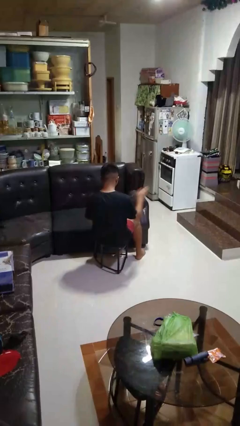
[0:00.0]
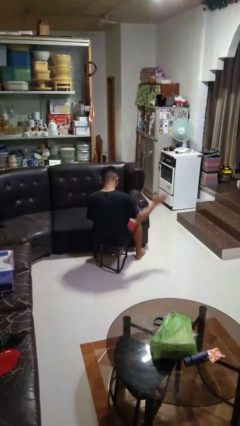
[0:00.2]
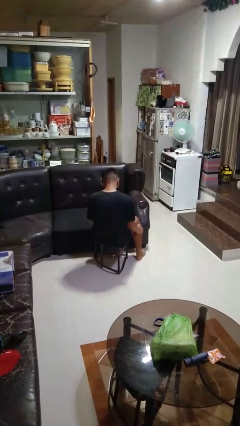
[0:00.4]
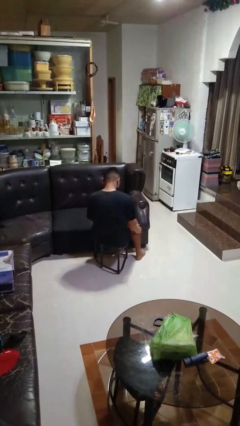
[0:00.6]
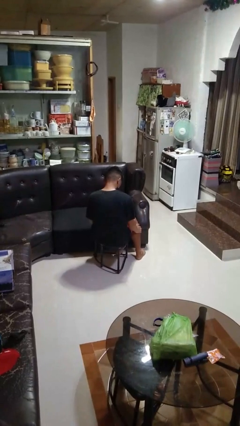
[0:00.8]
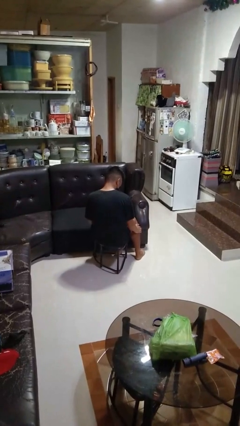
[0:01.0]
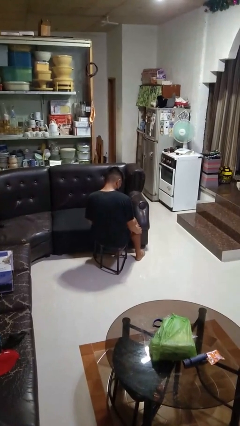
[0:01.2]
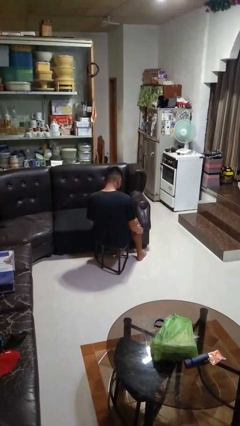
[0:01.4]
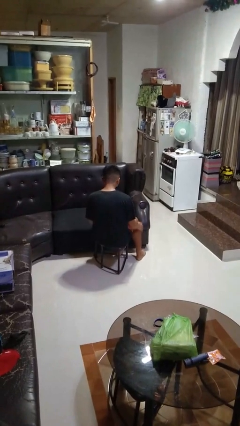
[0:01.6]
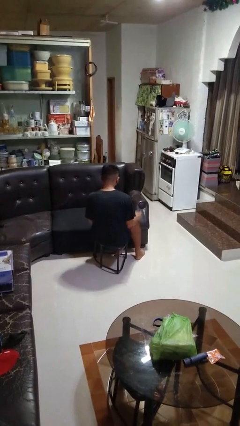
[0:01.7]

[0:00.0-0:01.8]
person swats bug

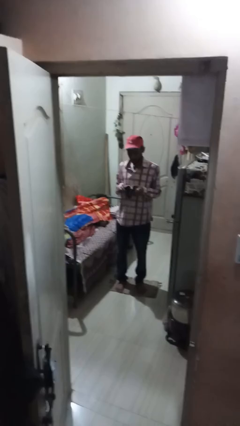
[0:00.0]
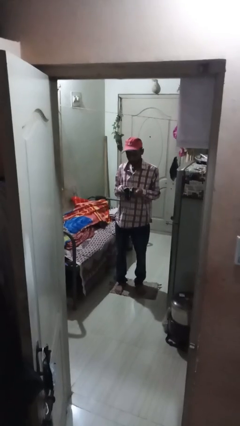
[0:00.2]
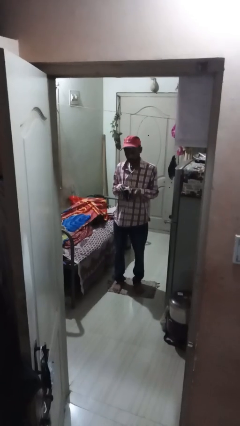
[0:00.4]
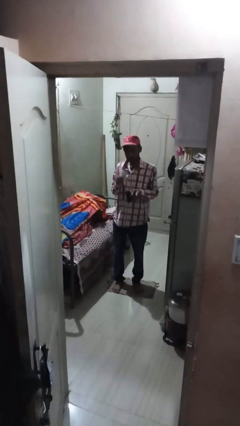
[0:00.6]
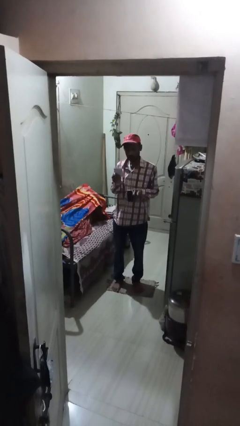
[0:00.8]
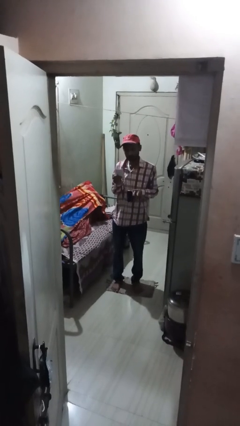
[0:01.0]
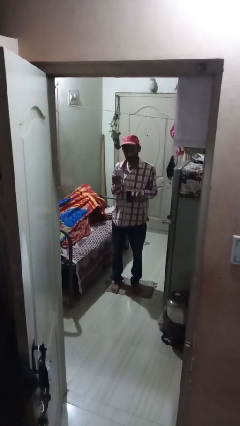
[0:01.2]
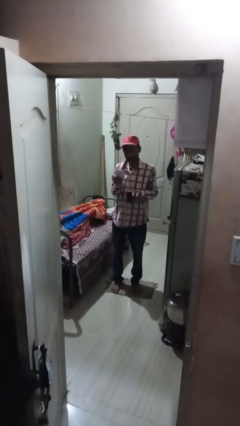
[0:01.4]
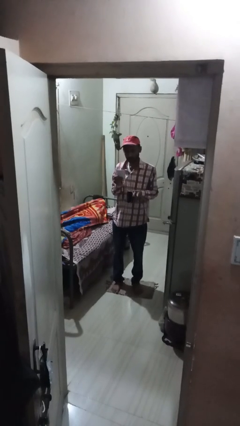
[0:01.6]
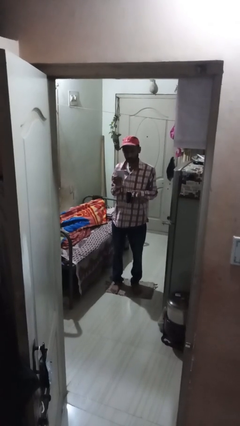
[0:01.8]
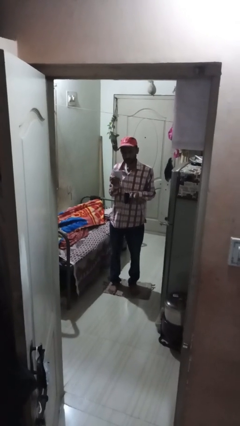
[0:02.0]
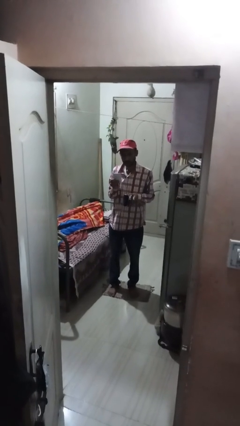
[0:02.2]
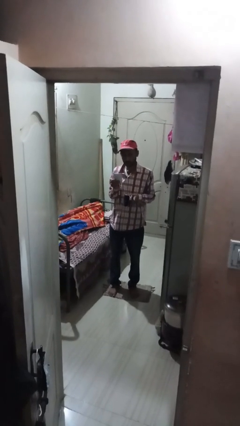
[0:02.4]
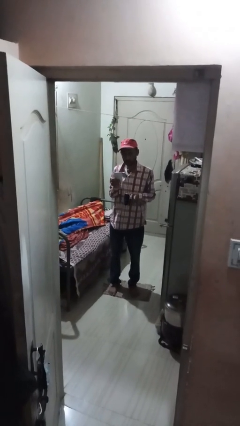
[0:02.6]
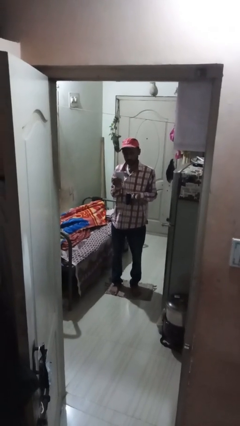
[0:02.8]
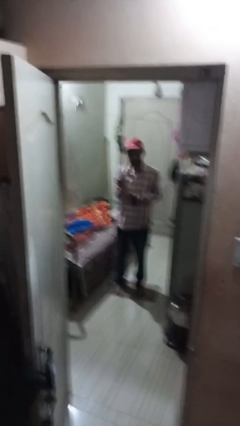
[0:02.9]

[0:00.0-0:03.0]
person takes object from purse

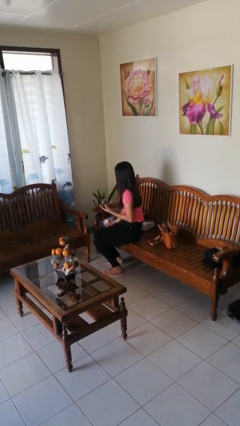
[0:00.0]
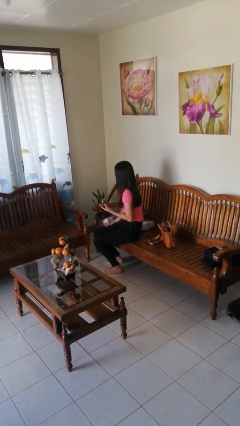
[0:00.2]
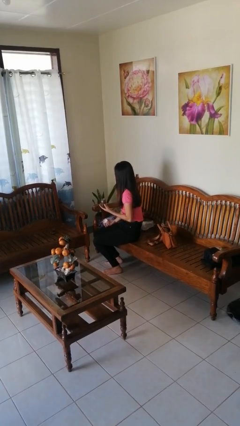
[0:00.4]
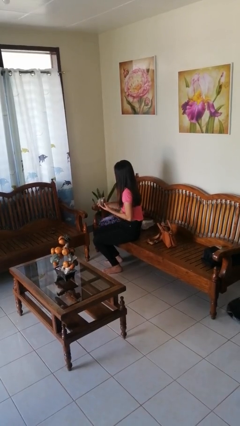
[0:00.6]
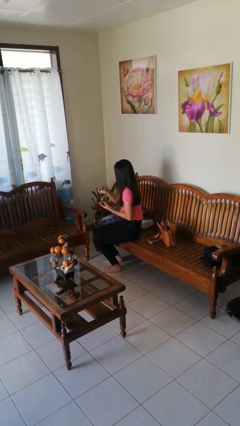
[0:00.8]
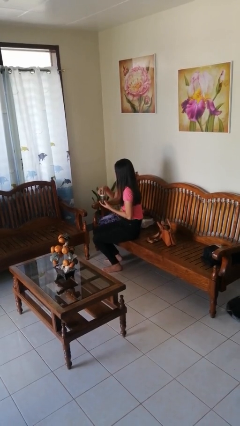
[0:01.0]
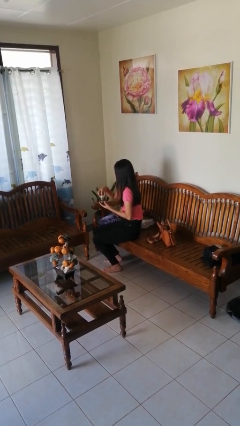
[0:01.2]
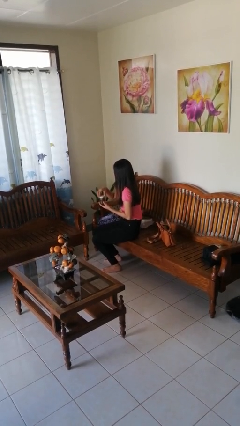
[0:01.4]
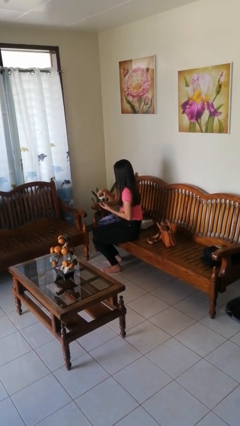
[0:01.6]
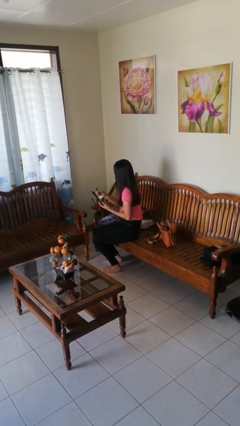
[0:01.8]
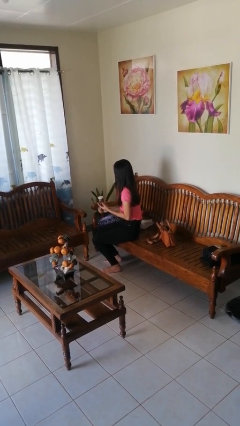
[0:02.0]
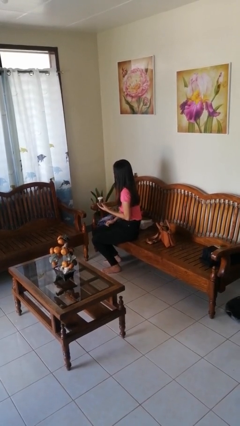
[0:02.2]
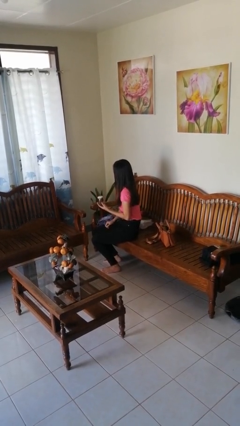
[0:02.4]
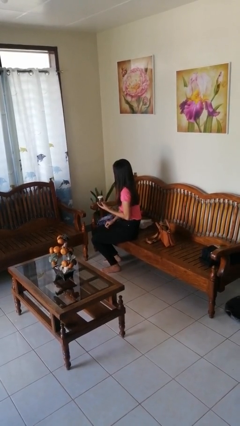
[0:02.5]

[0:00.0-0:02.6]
person closes jar

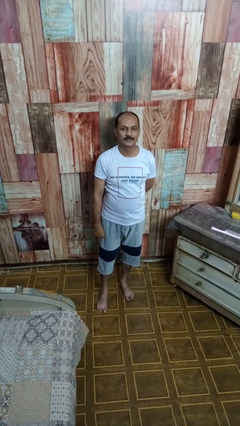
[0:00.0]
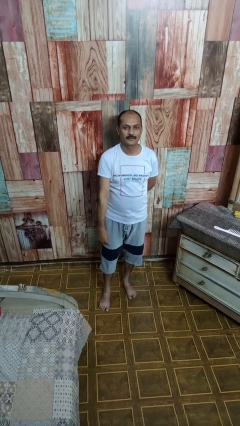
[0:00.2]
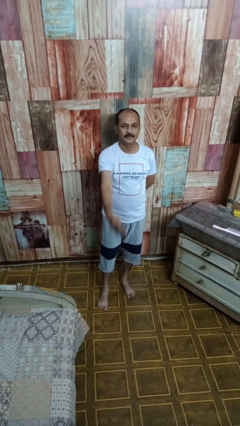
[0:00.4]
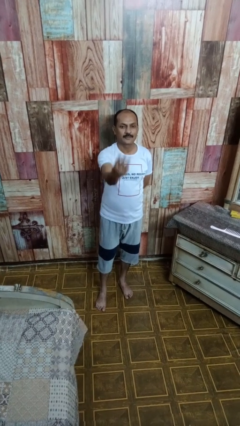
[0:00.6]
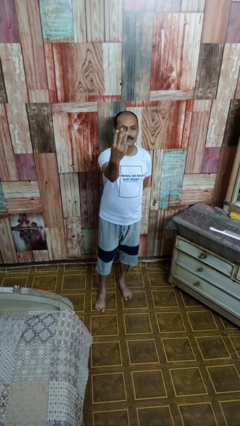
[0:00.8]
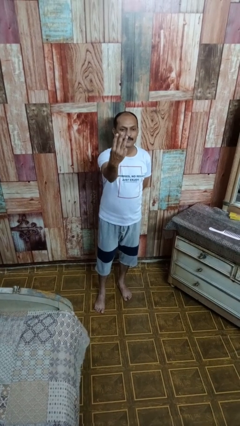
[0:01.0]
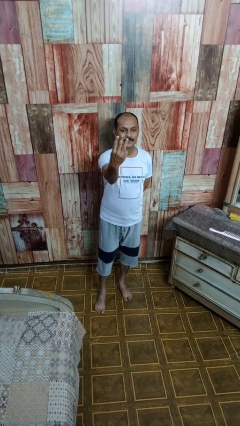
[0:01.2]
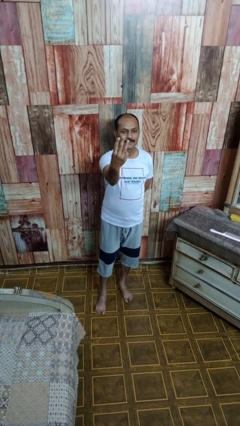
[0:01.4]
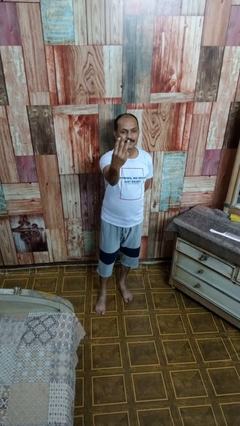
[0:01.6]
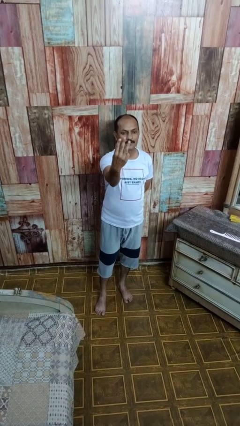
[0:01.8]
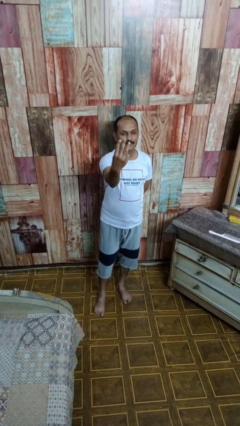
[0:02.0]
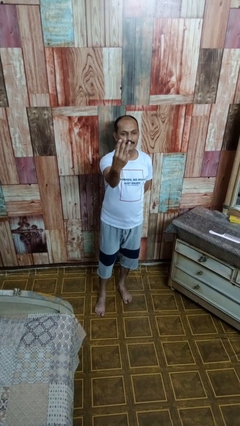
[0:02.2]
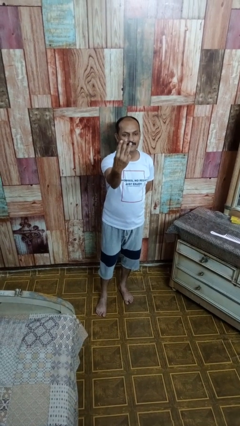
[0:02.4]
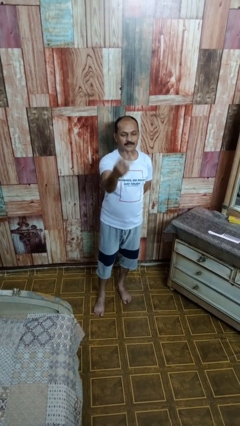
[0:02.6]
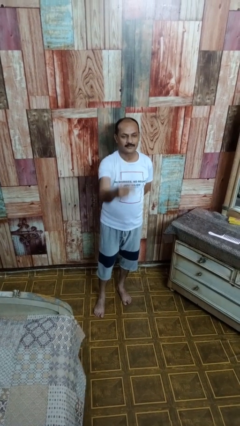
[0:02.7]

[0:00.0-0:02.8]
person gestures number three

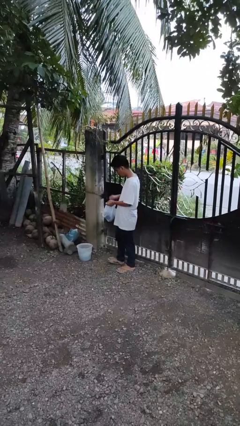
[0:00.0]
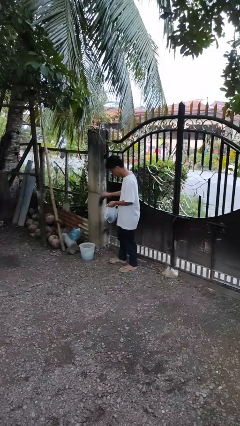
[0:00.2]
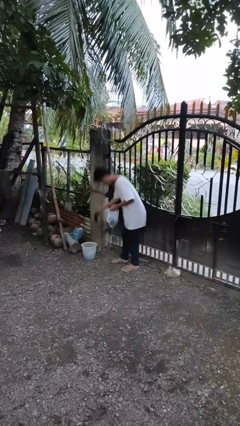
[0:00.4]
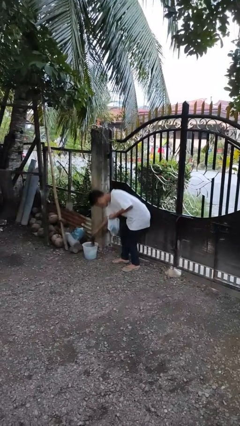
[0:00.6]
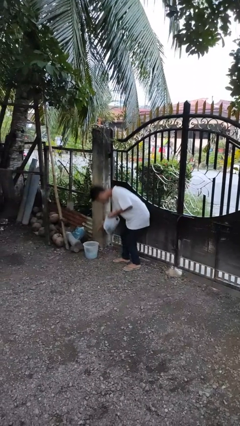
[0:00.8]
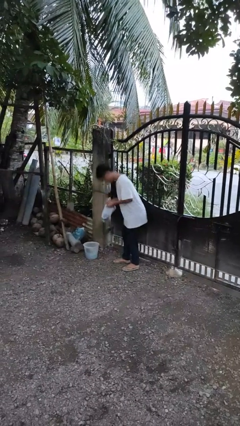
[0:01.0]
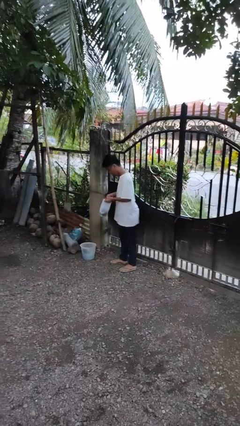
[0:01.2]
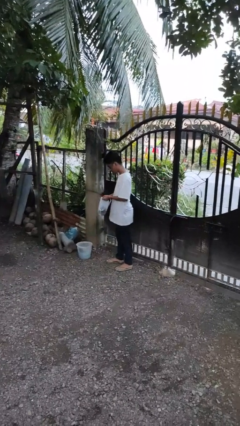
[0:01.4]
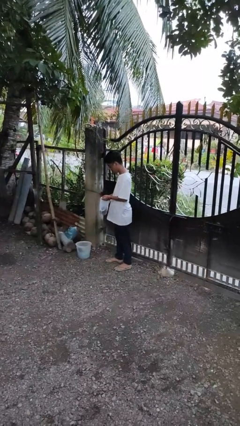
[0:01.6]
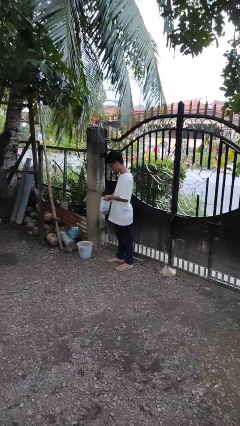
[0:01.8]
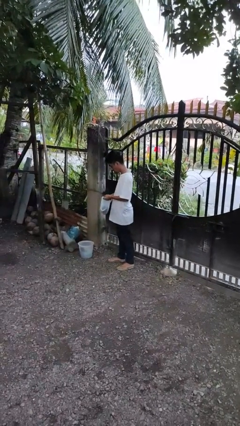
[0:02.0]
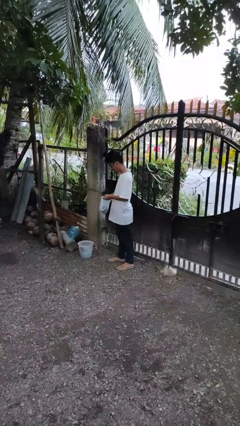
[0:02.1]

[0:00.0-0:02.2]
person discards trash

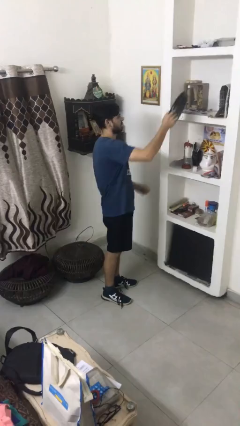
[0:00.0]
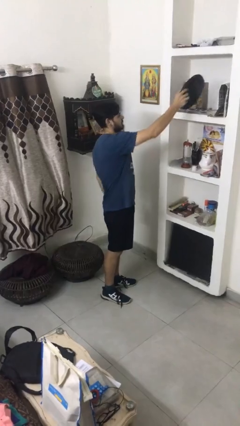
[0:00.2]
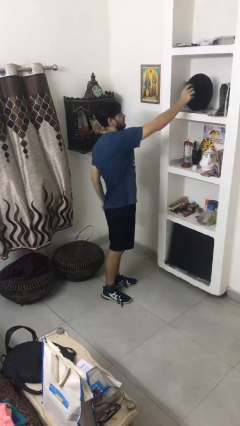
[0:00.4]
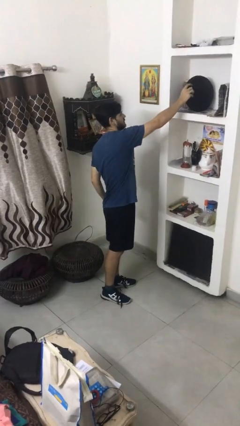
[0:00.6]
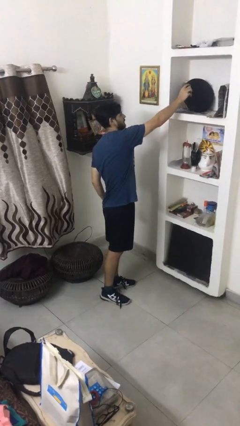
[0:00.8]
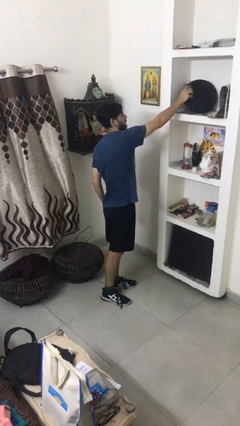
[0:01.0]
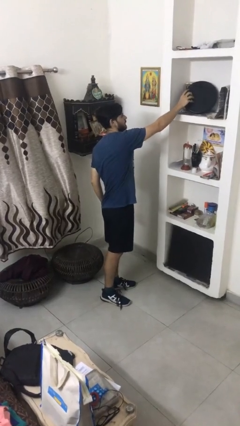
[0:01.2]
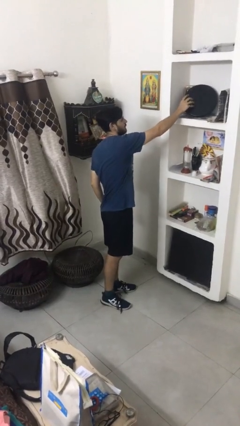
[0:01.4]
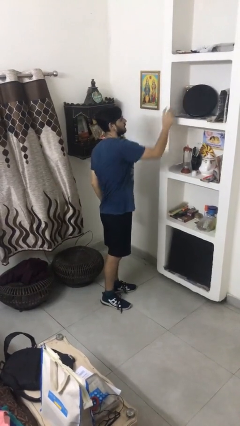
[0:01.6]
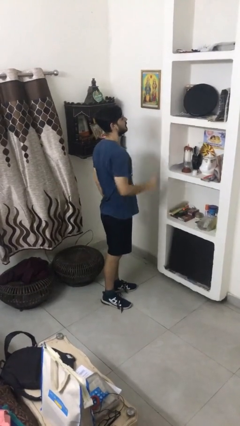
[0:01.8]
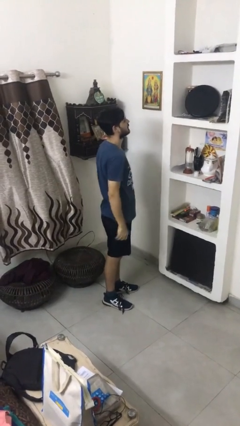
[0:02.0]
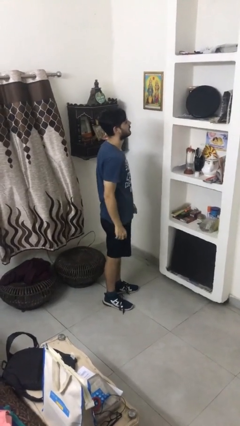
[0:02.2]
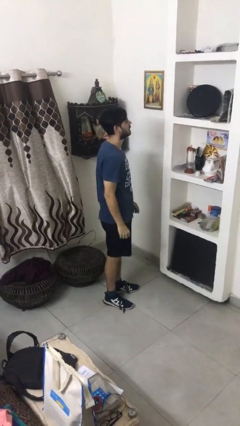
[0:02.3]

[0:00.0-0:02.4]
person puts down object on shelf

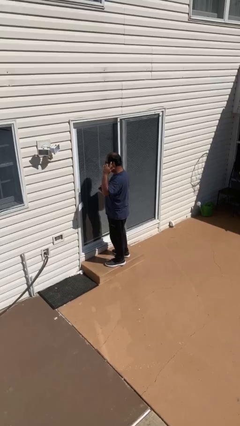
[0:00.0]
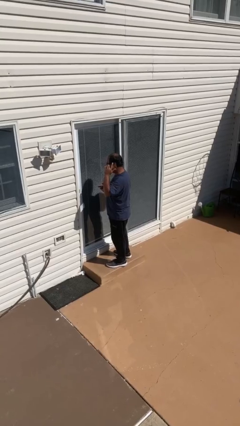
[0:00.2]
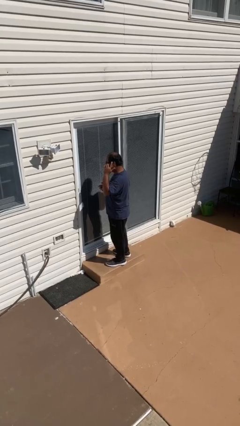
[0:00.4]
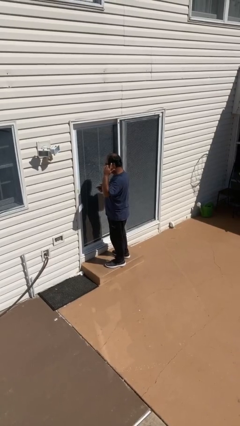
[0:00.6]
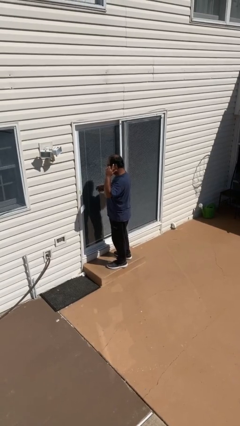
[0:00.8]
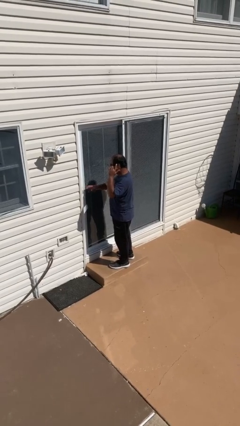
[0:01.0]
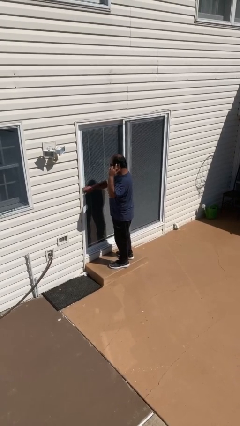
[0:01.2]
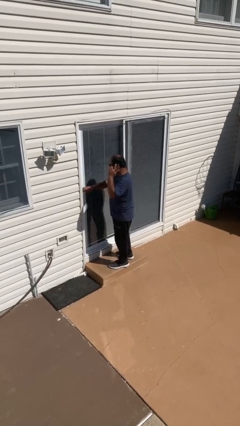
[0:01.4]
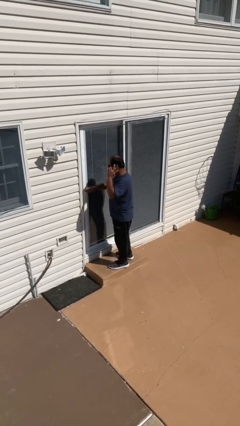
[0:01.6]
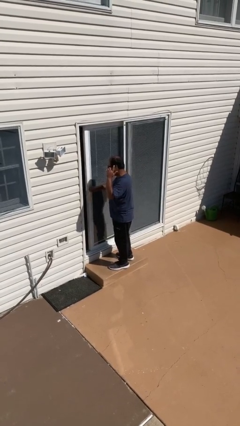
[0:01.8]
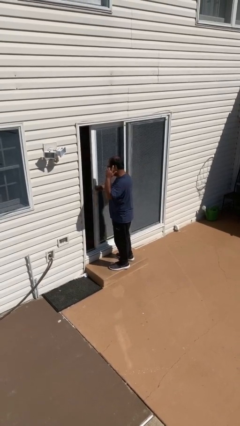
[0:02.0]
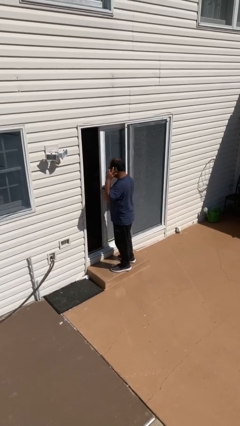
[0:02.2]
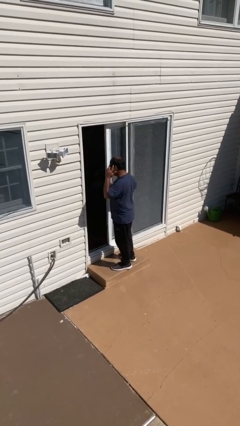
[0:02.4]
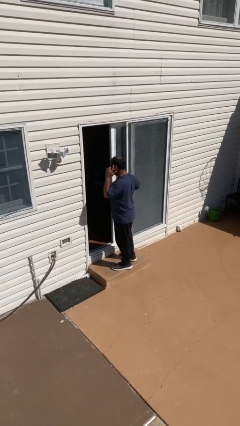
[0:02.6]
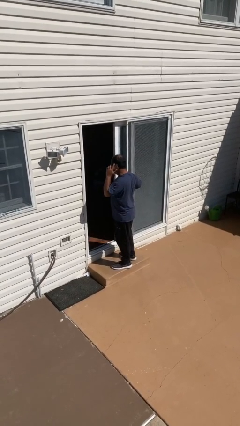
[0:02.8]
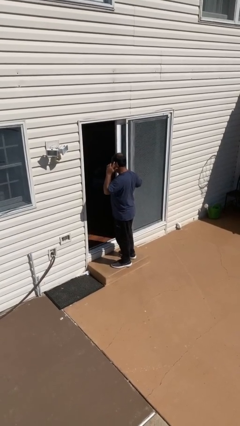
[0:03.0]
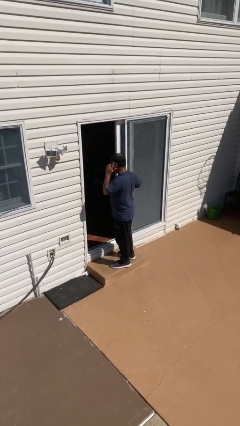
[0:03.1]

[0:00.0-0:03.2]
person opens facility door
